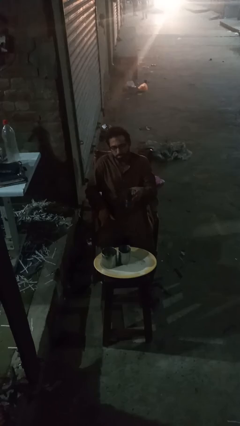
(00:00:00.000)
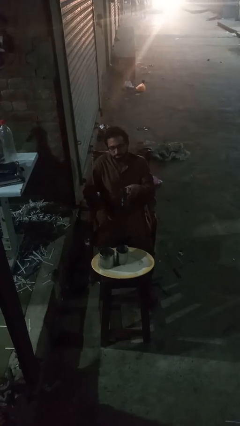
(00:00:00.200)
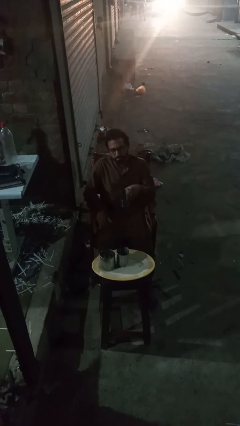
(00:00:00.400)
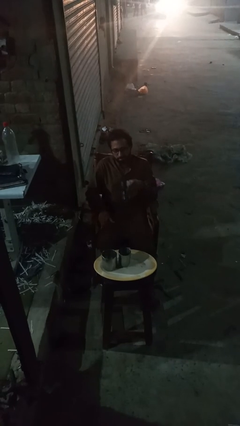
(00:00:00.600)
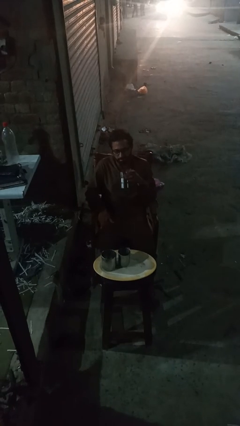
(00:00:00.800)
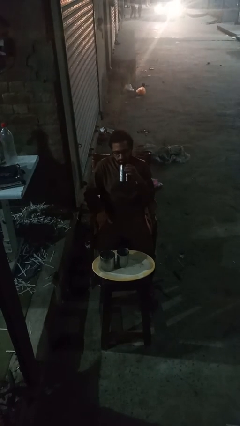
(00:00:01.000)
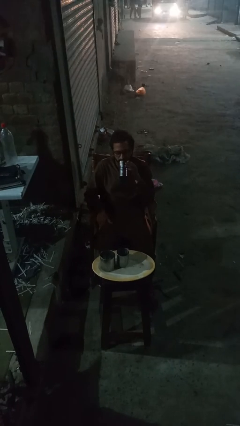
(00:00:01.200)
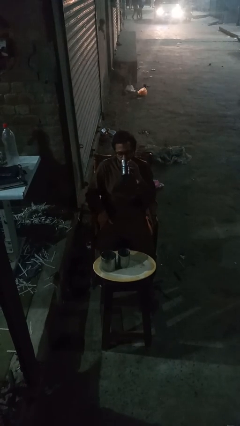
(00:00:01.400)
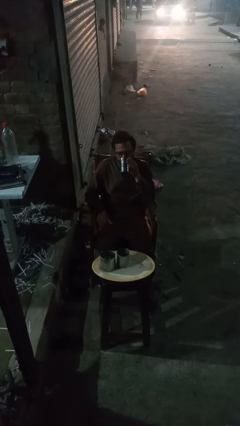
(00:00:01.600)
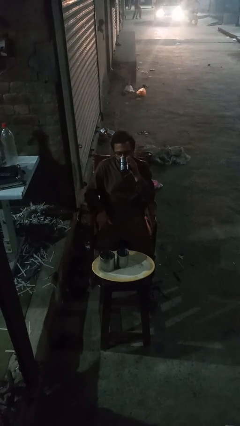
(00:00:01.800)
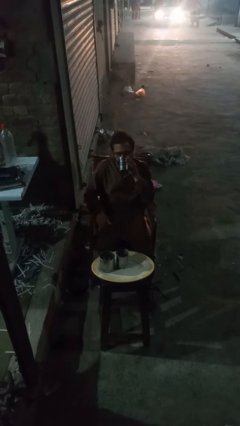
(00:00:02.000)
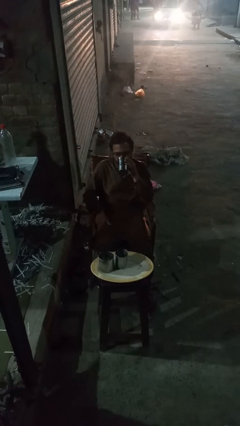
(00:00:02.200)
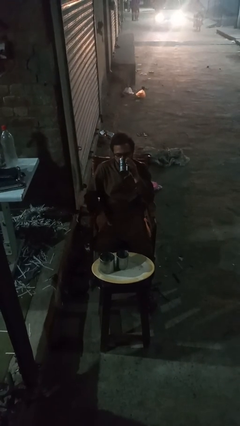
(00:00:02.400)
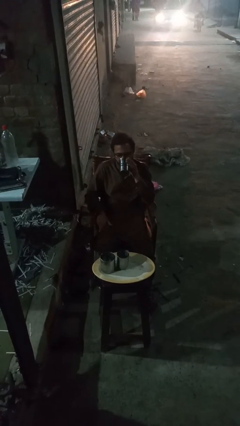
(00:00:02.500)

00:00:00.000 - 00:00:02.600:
person drinks from shotglass

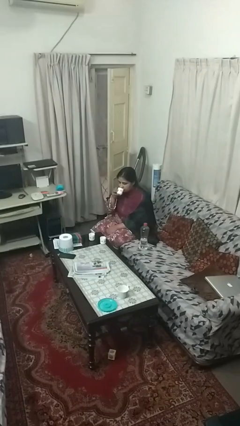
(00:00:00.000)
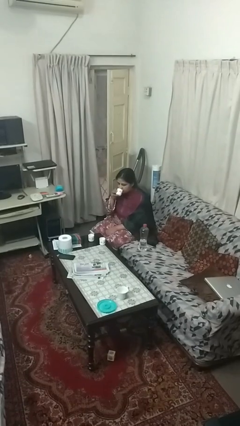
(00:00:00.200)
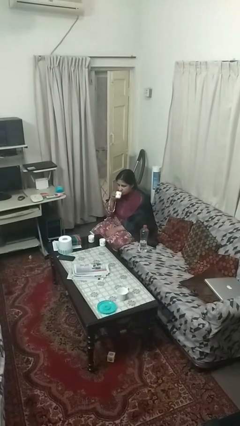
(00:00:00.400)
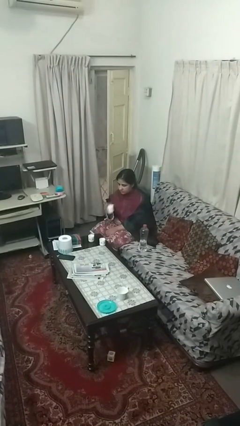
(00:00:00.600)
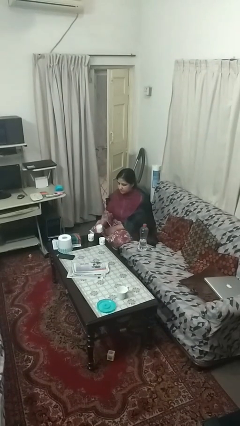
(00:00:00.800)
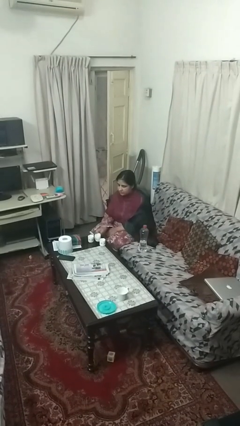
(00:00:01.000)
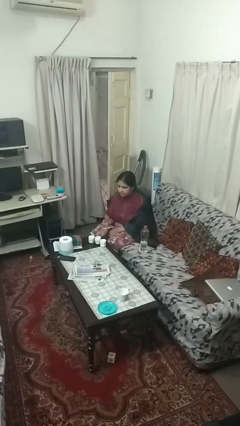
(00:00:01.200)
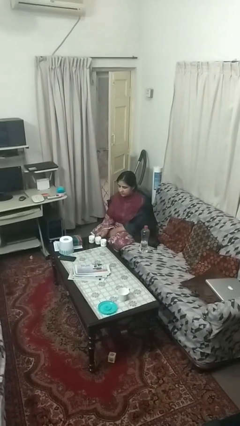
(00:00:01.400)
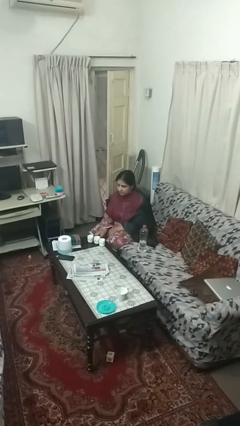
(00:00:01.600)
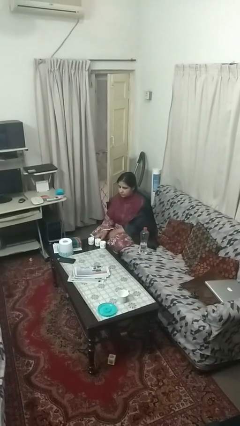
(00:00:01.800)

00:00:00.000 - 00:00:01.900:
person puts down object on table

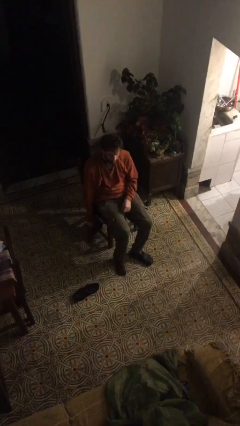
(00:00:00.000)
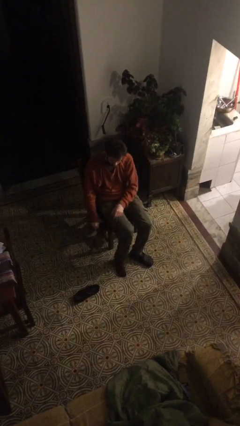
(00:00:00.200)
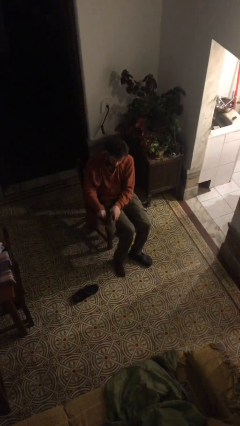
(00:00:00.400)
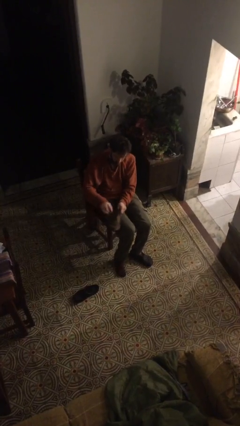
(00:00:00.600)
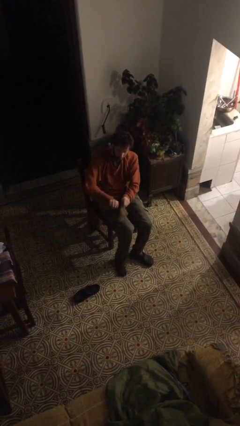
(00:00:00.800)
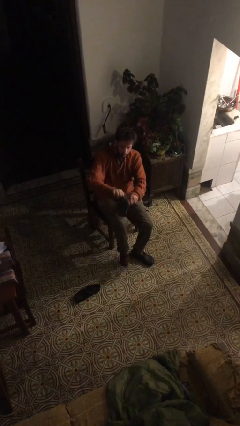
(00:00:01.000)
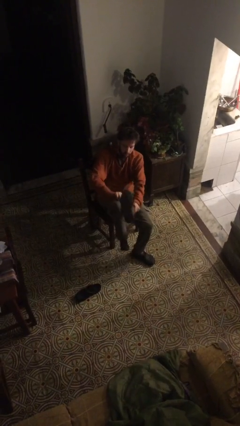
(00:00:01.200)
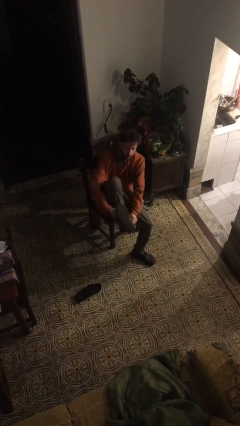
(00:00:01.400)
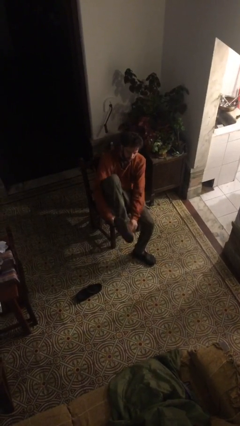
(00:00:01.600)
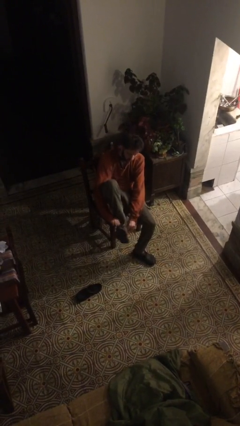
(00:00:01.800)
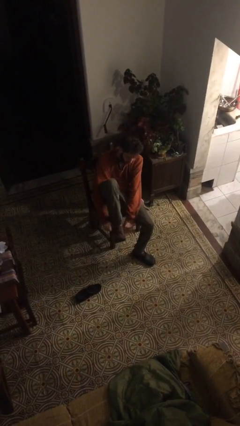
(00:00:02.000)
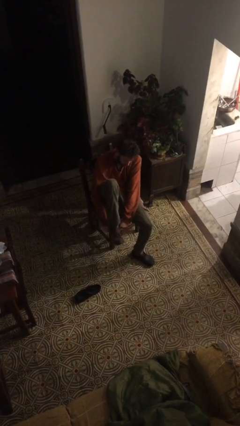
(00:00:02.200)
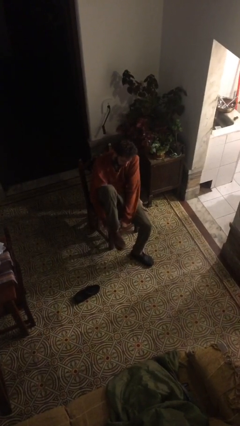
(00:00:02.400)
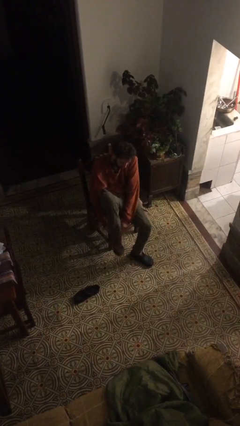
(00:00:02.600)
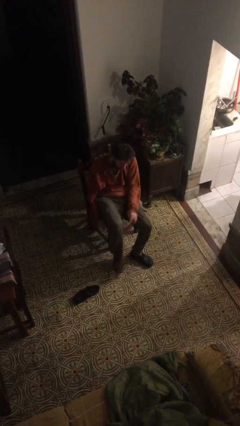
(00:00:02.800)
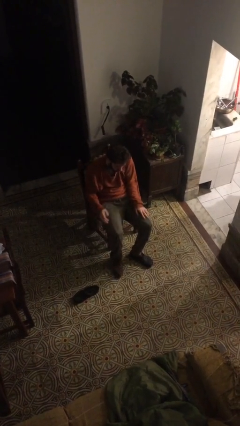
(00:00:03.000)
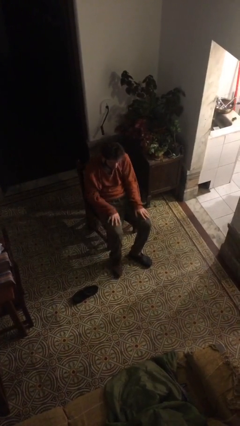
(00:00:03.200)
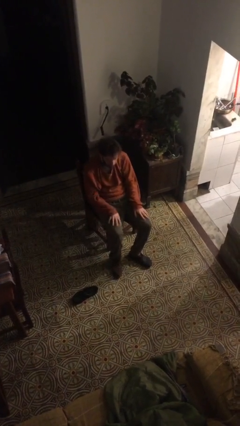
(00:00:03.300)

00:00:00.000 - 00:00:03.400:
person puts on boots

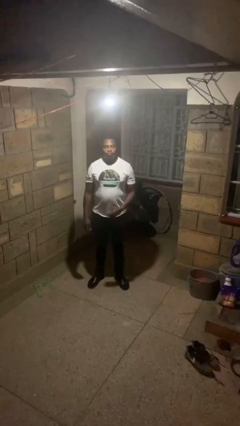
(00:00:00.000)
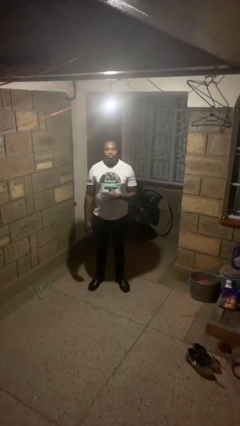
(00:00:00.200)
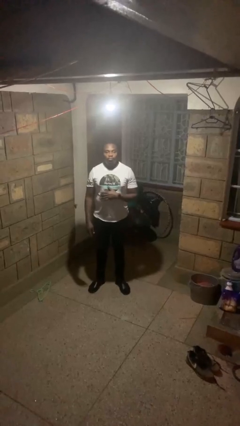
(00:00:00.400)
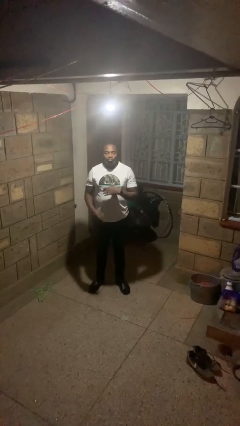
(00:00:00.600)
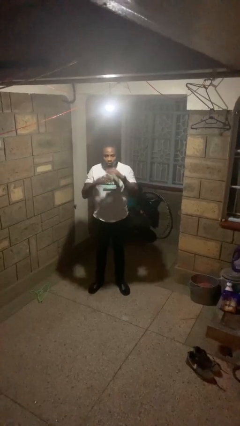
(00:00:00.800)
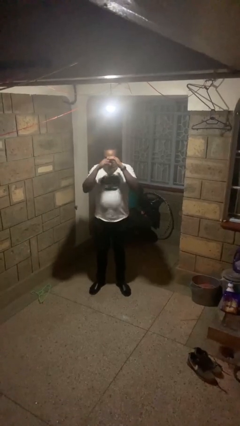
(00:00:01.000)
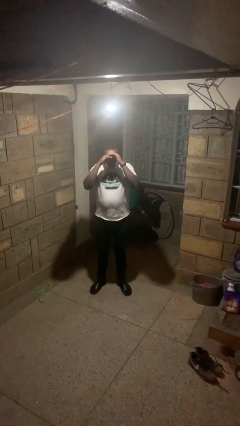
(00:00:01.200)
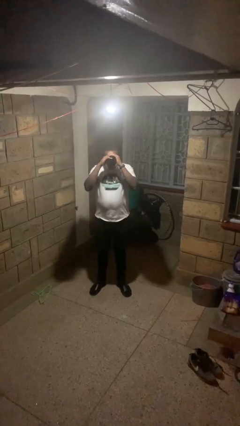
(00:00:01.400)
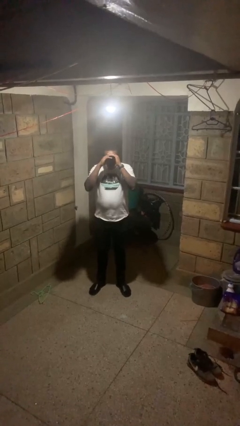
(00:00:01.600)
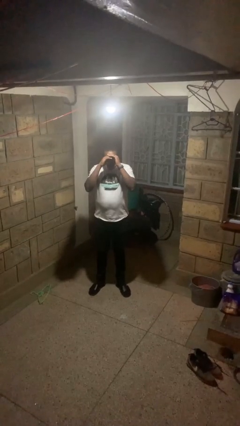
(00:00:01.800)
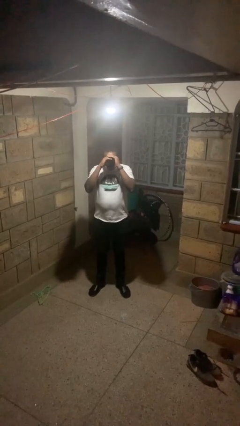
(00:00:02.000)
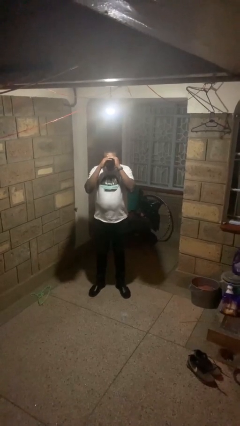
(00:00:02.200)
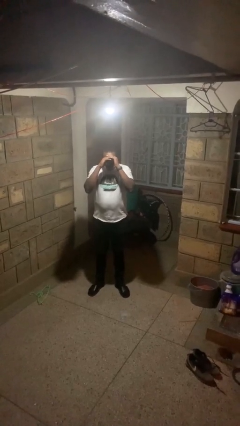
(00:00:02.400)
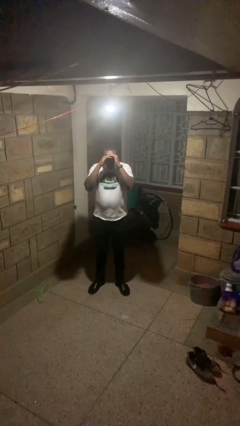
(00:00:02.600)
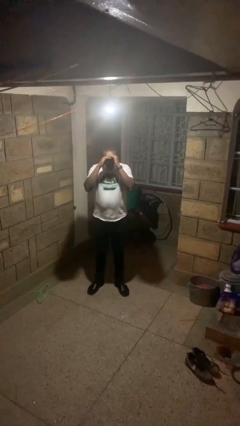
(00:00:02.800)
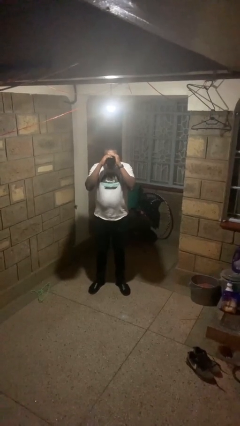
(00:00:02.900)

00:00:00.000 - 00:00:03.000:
person shades eyes

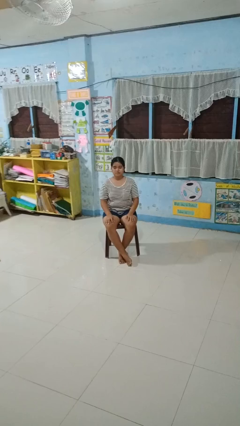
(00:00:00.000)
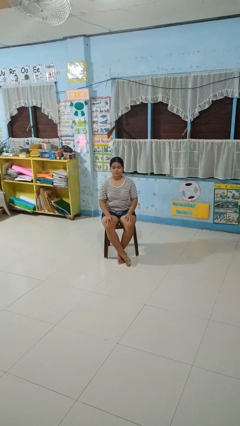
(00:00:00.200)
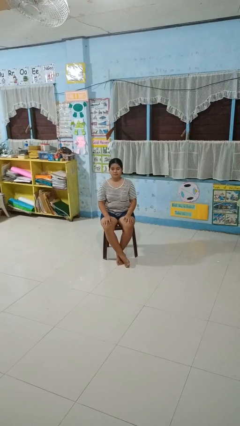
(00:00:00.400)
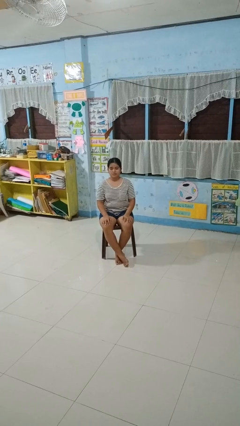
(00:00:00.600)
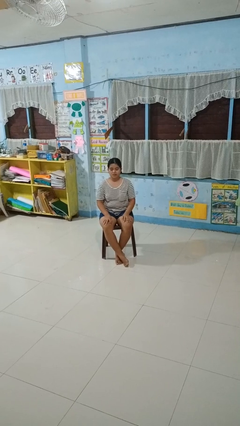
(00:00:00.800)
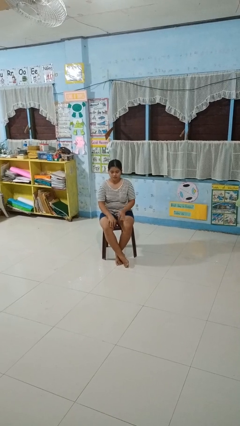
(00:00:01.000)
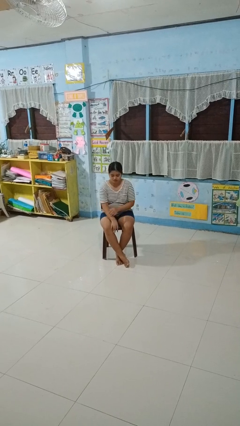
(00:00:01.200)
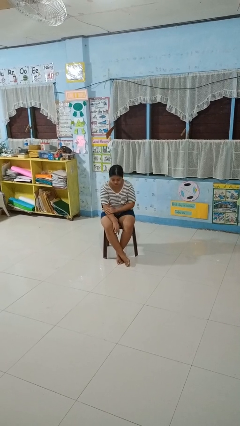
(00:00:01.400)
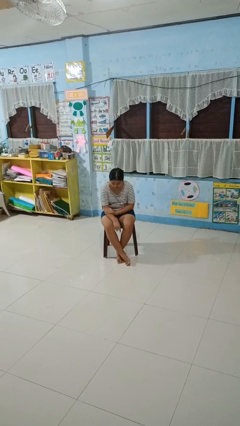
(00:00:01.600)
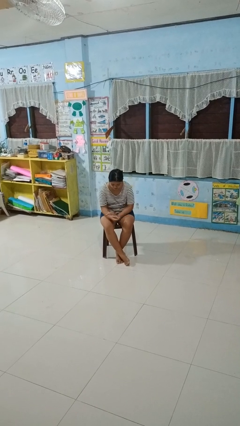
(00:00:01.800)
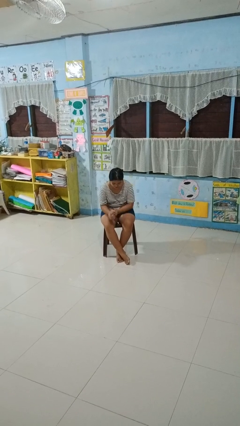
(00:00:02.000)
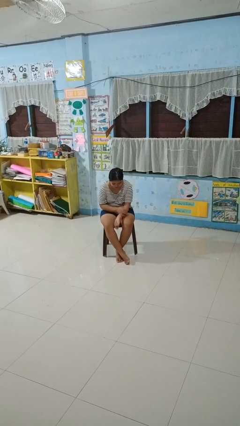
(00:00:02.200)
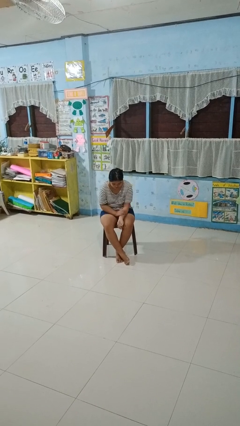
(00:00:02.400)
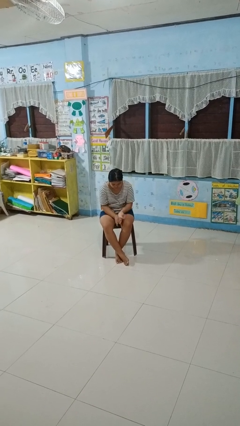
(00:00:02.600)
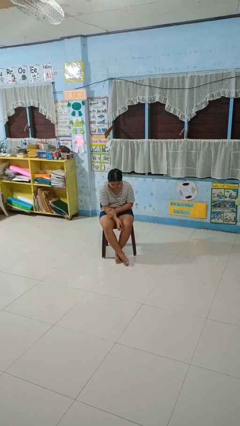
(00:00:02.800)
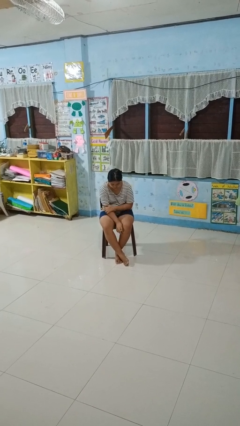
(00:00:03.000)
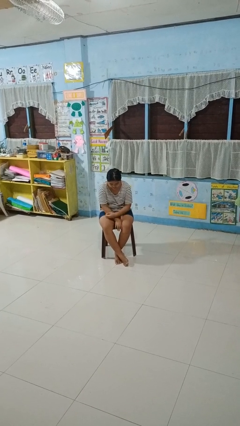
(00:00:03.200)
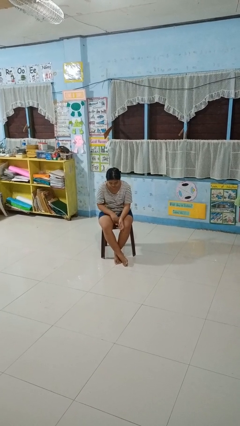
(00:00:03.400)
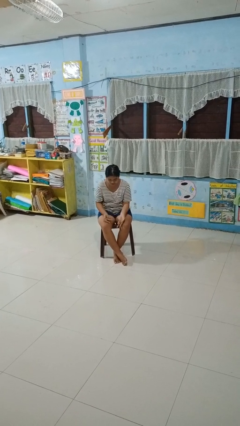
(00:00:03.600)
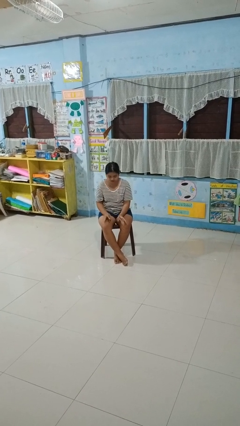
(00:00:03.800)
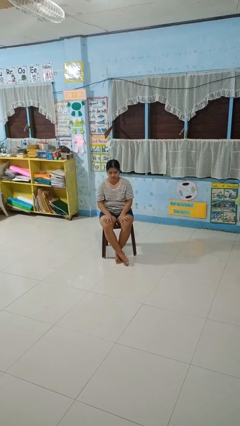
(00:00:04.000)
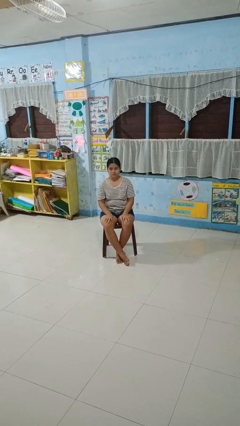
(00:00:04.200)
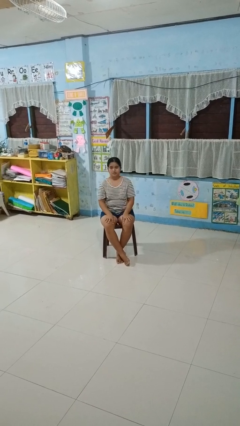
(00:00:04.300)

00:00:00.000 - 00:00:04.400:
person looks at hands in lap

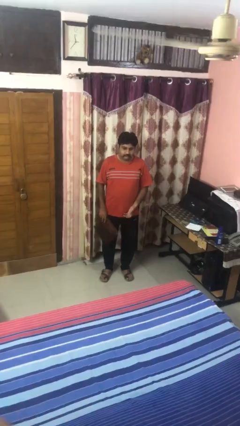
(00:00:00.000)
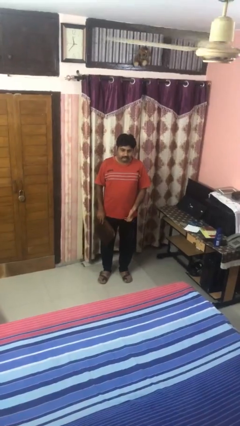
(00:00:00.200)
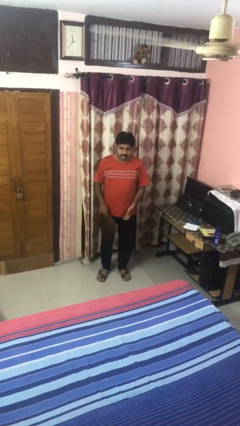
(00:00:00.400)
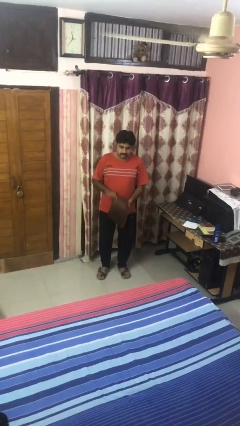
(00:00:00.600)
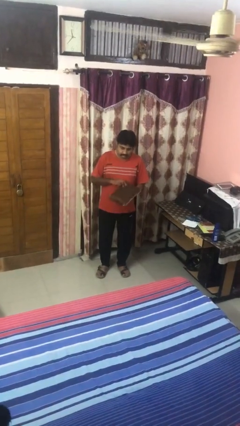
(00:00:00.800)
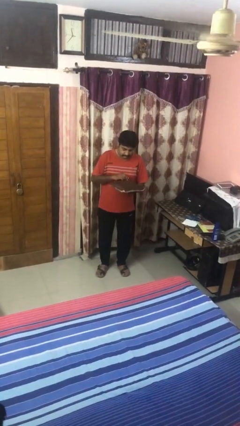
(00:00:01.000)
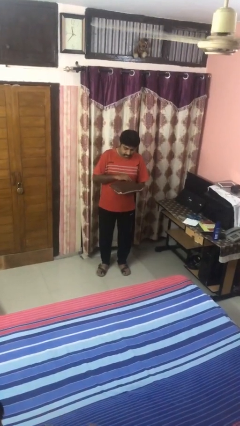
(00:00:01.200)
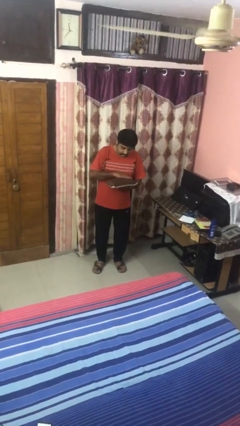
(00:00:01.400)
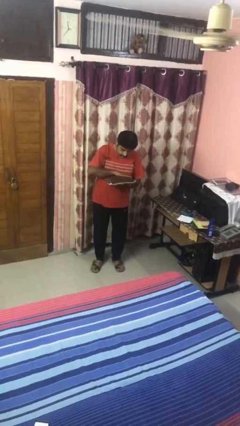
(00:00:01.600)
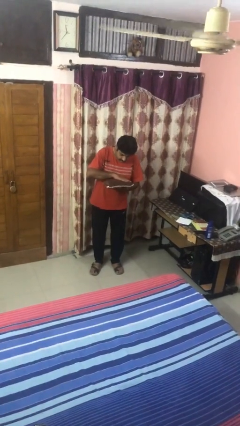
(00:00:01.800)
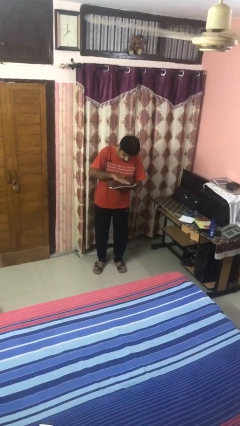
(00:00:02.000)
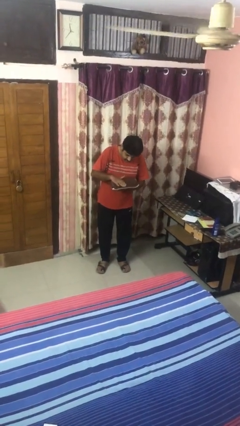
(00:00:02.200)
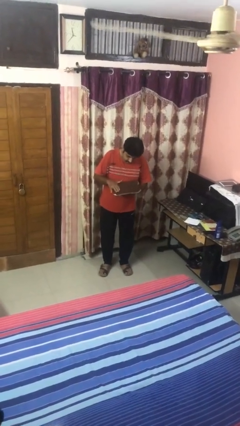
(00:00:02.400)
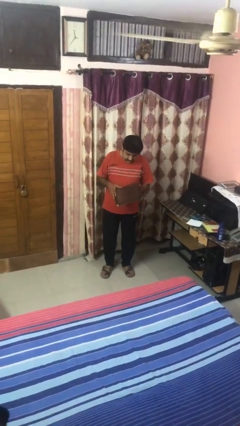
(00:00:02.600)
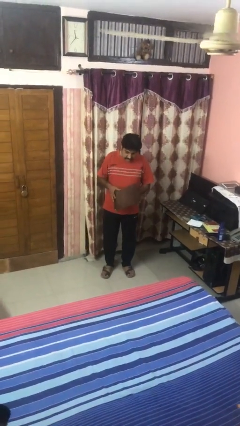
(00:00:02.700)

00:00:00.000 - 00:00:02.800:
person waves hand over object
